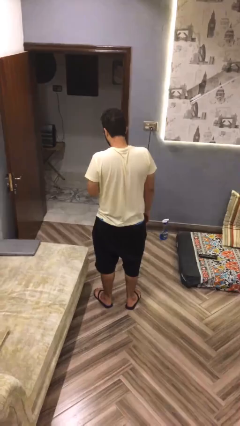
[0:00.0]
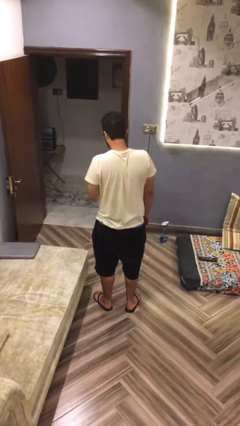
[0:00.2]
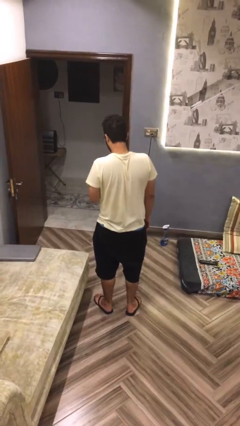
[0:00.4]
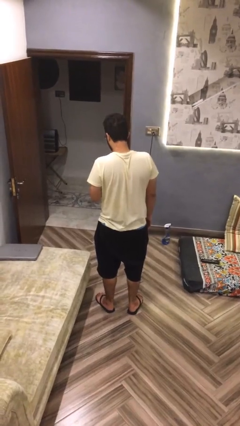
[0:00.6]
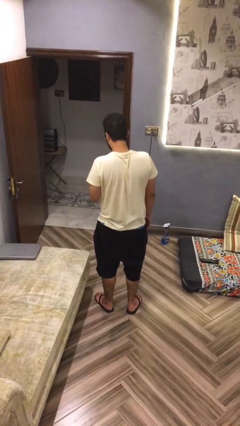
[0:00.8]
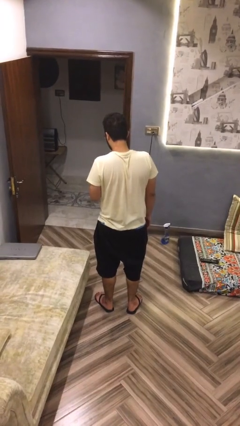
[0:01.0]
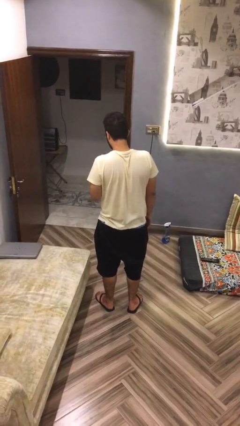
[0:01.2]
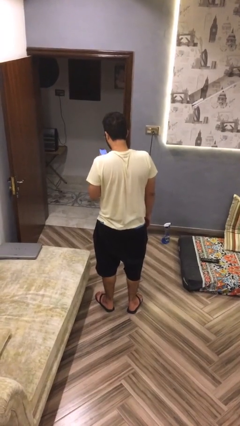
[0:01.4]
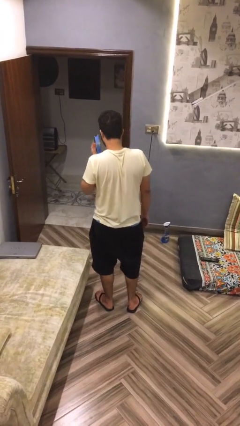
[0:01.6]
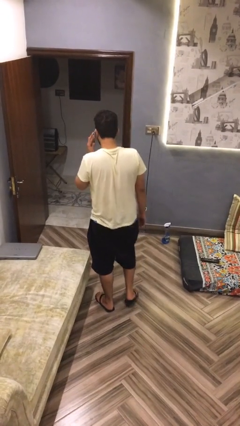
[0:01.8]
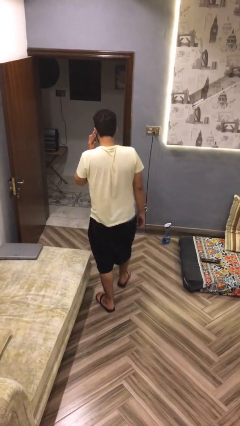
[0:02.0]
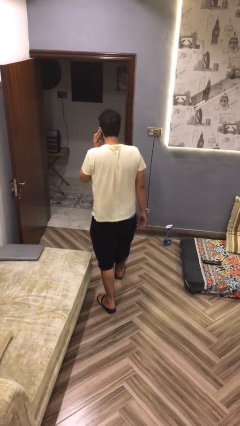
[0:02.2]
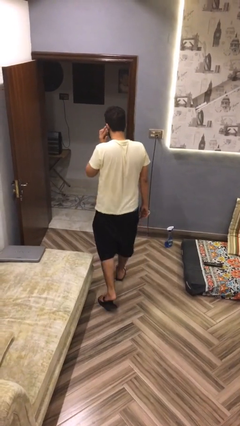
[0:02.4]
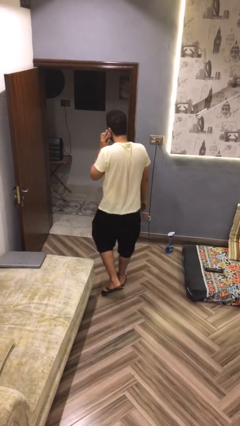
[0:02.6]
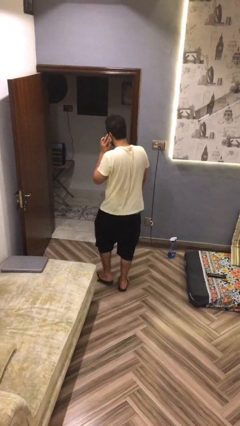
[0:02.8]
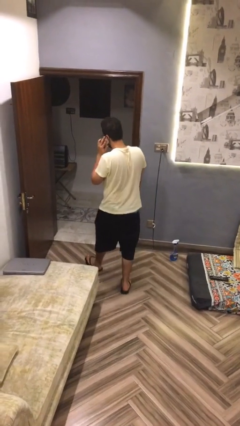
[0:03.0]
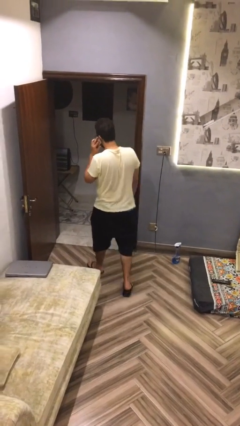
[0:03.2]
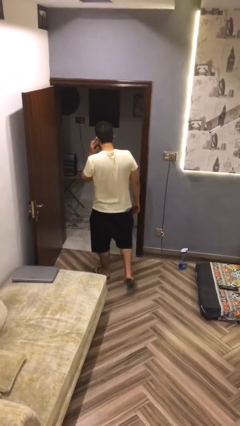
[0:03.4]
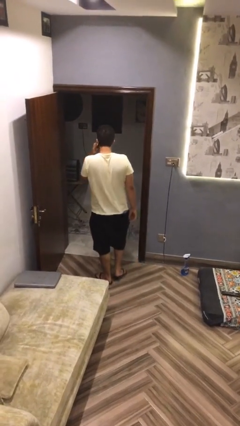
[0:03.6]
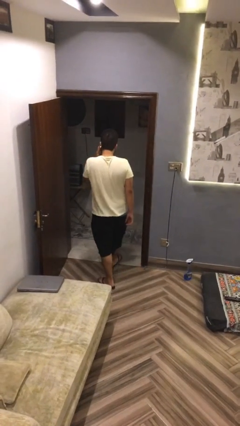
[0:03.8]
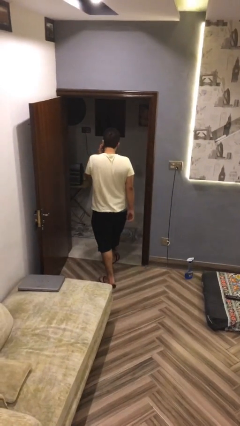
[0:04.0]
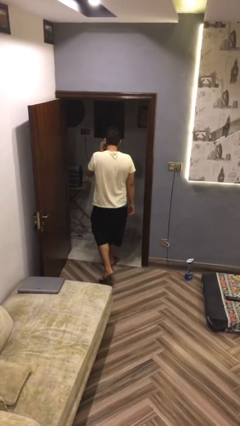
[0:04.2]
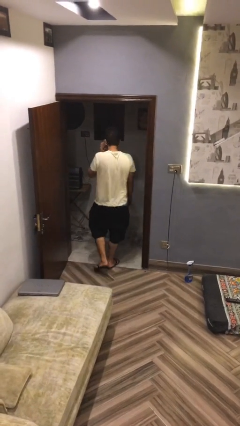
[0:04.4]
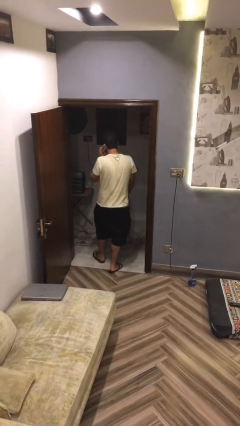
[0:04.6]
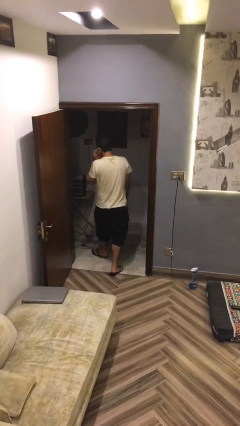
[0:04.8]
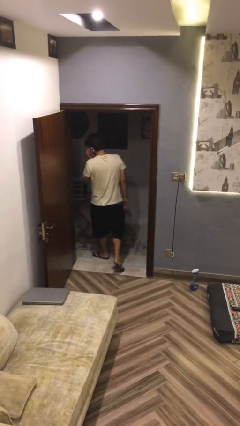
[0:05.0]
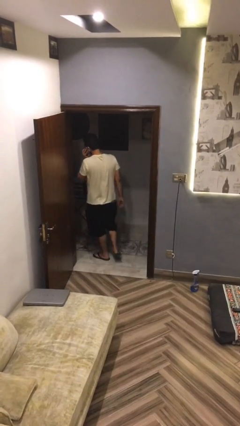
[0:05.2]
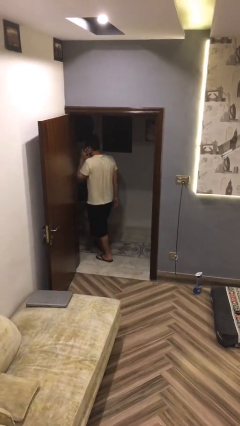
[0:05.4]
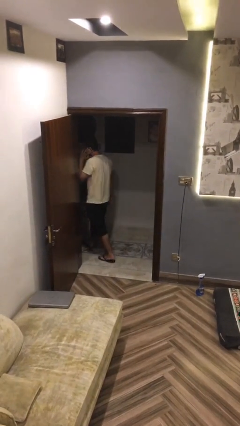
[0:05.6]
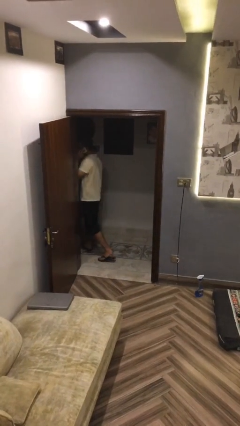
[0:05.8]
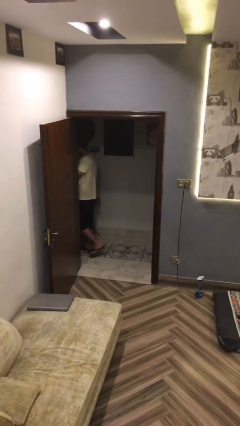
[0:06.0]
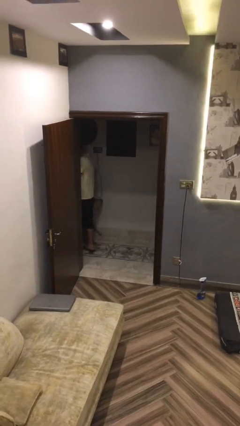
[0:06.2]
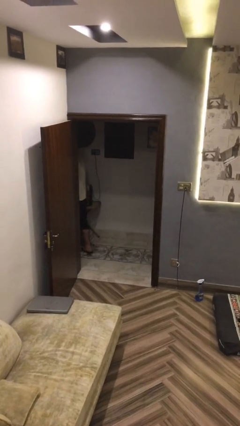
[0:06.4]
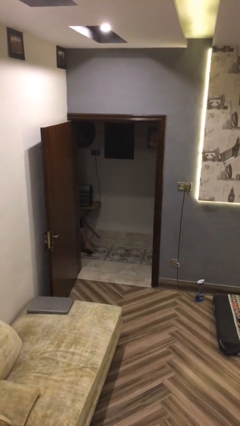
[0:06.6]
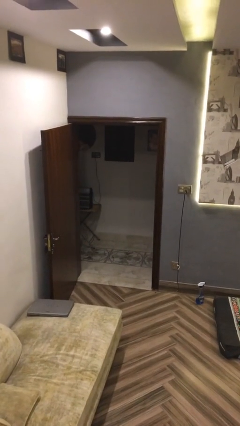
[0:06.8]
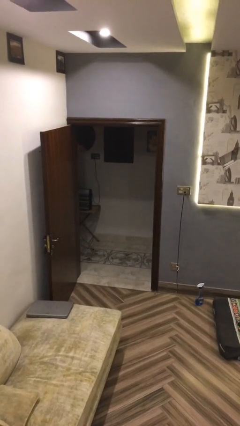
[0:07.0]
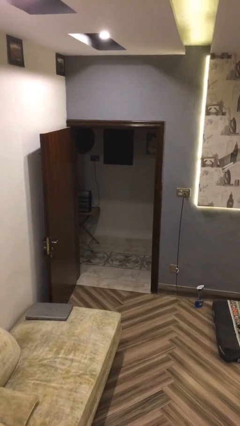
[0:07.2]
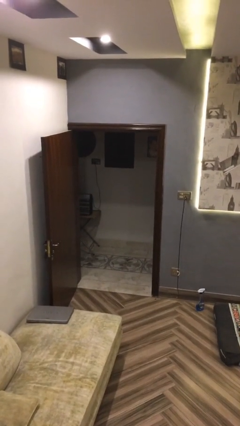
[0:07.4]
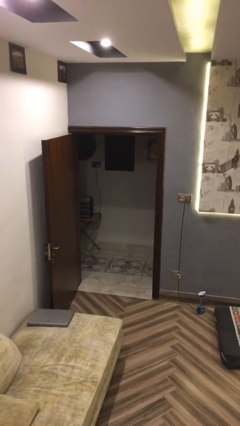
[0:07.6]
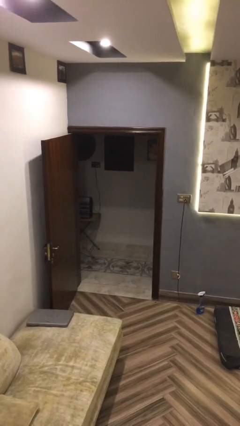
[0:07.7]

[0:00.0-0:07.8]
person exits scene through structure

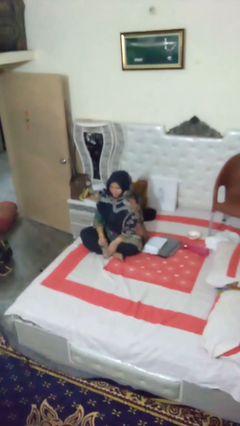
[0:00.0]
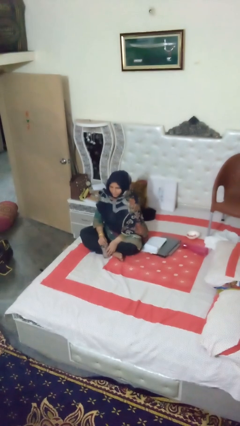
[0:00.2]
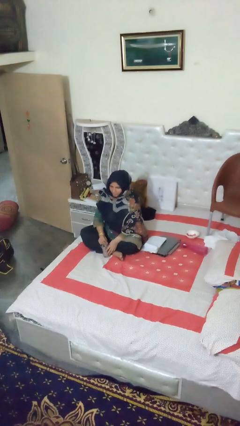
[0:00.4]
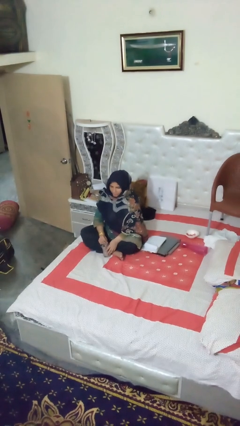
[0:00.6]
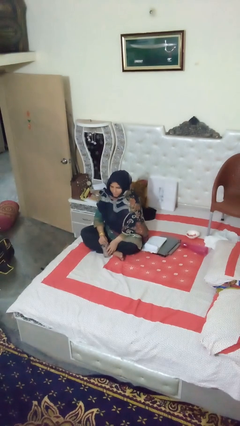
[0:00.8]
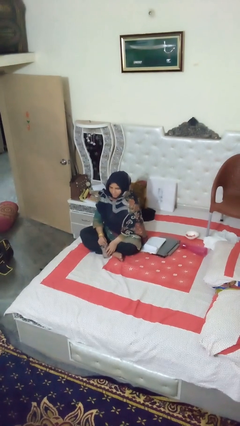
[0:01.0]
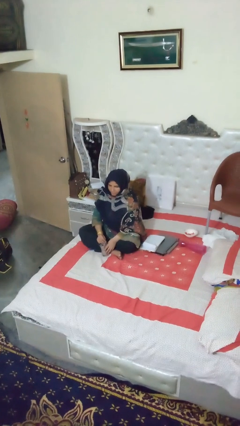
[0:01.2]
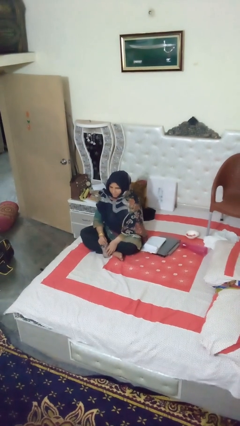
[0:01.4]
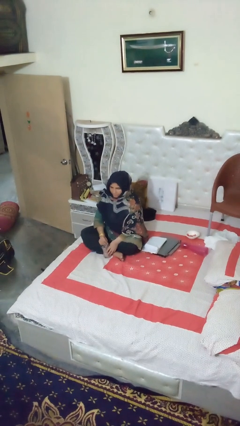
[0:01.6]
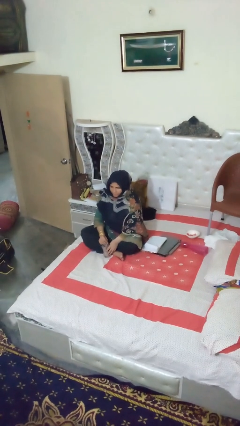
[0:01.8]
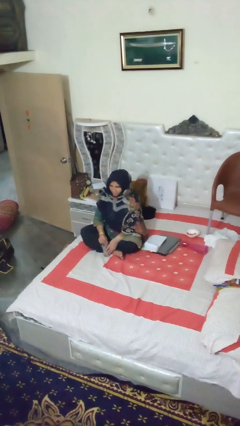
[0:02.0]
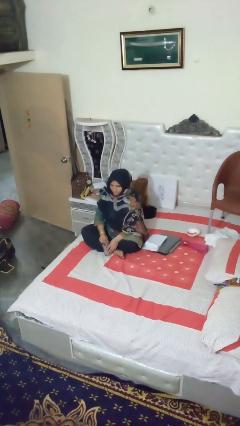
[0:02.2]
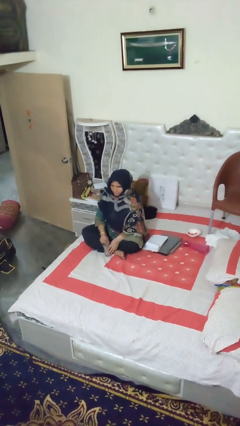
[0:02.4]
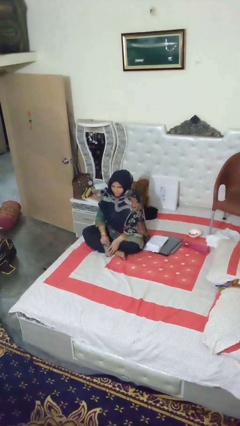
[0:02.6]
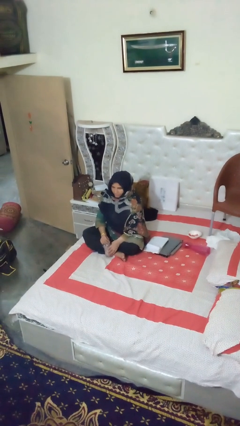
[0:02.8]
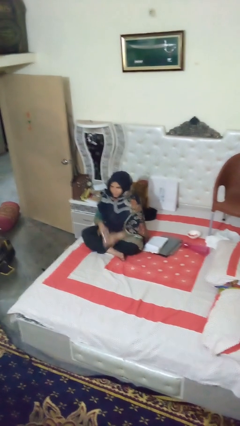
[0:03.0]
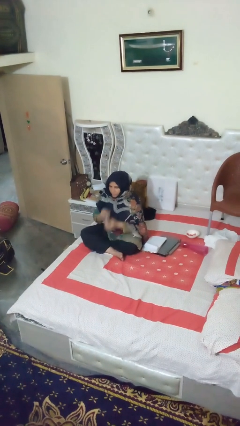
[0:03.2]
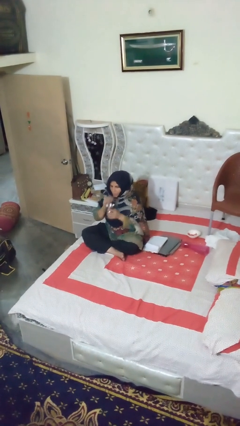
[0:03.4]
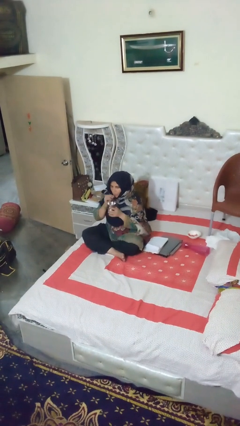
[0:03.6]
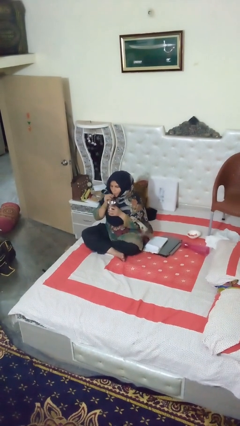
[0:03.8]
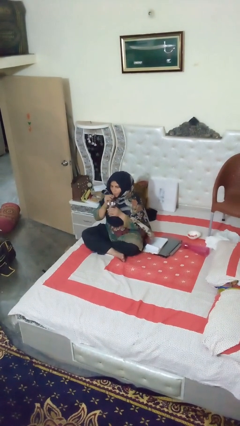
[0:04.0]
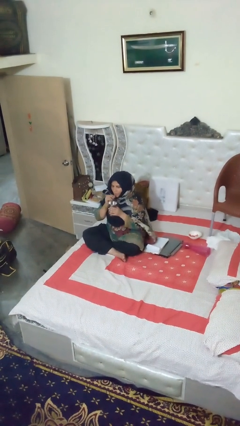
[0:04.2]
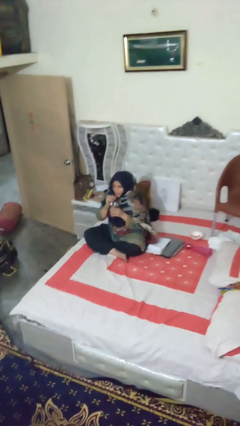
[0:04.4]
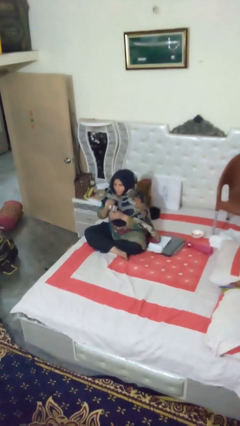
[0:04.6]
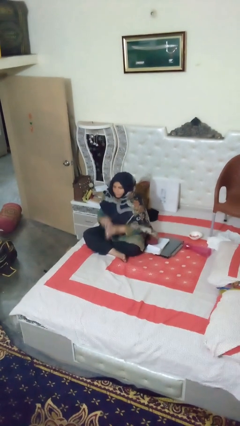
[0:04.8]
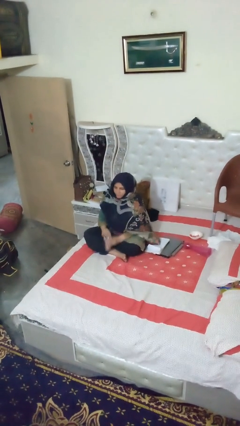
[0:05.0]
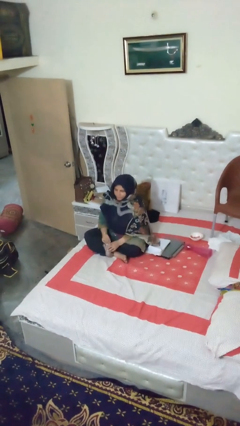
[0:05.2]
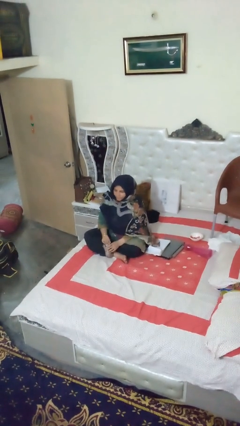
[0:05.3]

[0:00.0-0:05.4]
person drinks from straw

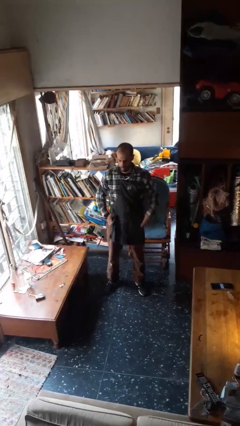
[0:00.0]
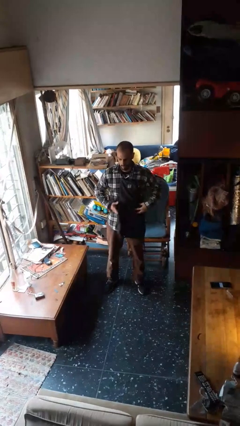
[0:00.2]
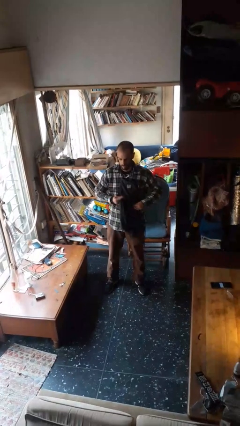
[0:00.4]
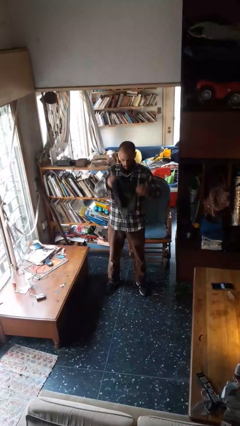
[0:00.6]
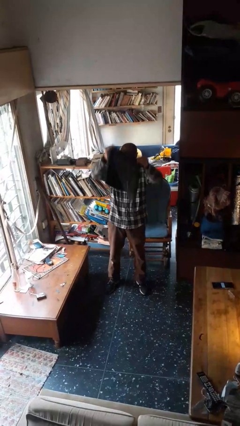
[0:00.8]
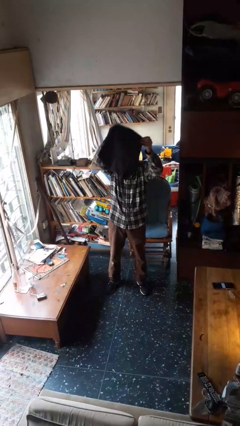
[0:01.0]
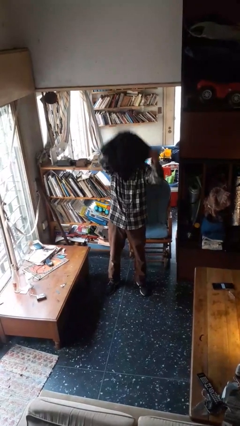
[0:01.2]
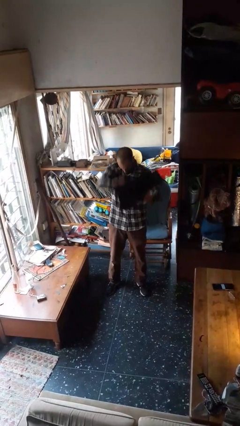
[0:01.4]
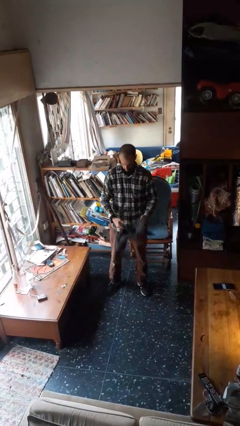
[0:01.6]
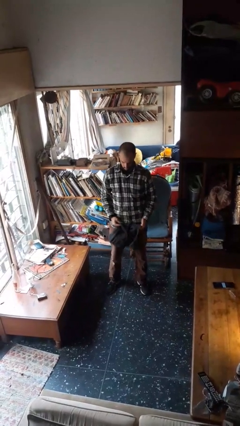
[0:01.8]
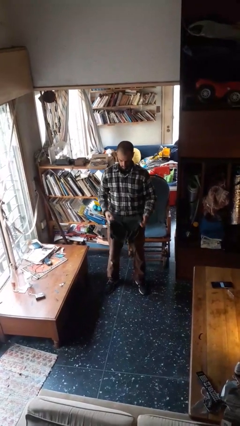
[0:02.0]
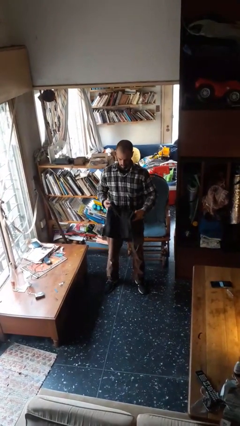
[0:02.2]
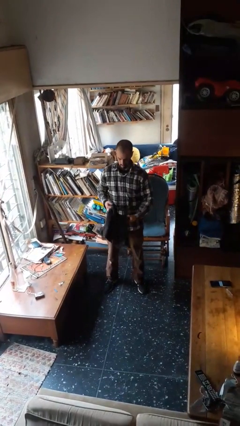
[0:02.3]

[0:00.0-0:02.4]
person takes off apron

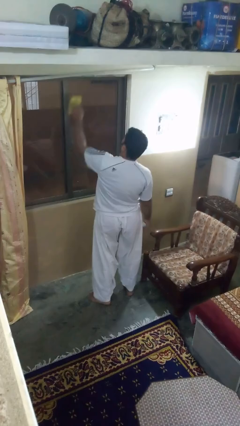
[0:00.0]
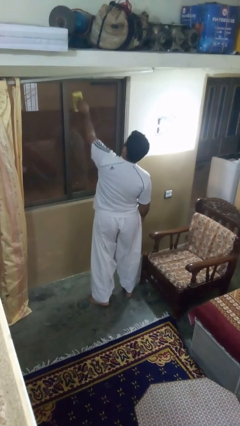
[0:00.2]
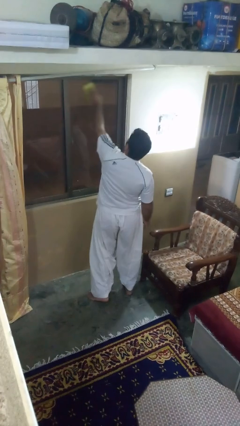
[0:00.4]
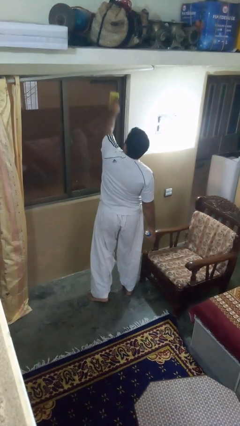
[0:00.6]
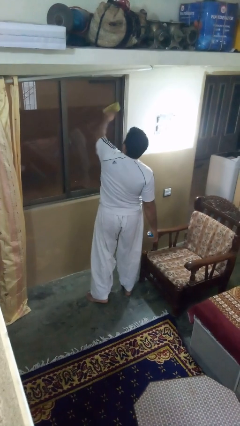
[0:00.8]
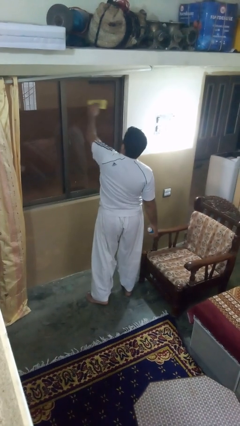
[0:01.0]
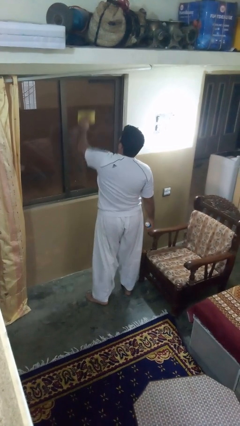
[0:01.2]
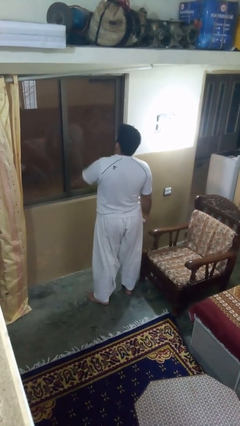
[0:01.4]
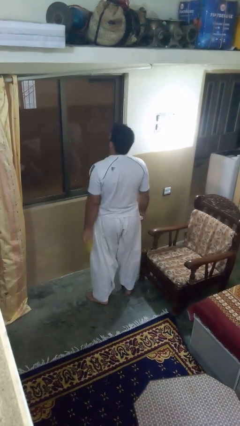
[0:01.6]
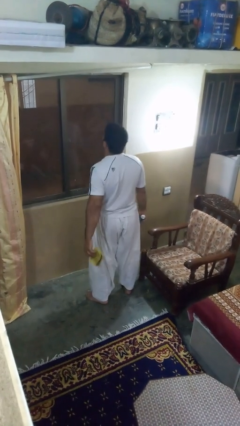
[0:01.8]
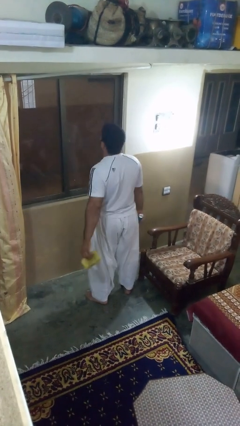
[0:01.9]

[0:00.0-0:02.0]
person washes window

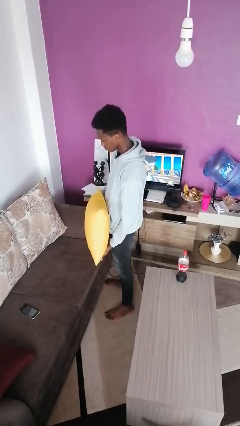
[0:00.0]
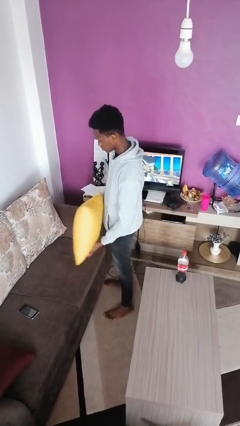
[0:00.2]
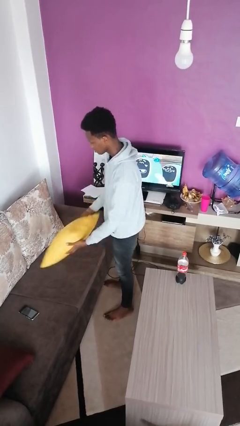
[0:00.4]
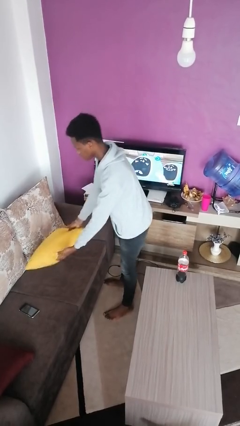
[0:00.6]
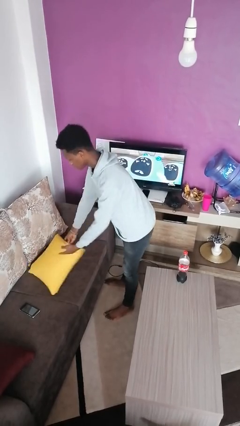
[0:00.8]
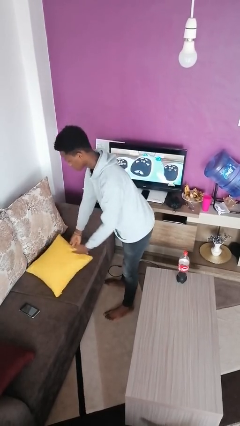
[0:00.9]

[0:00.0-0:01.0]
person puts down object on couch
